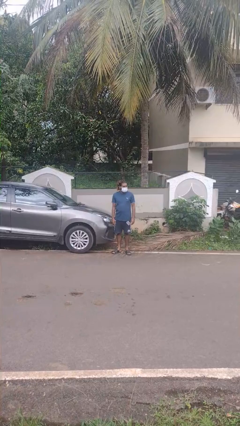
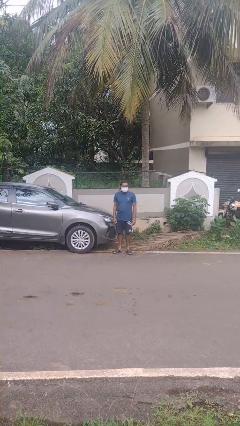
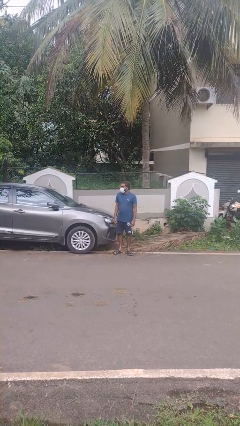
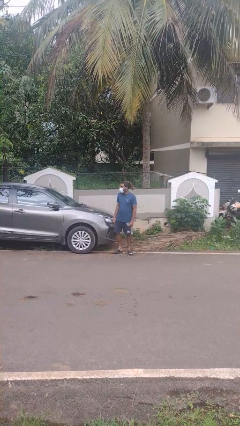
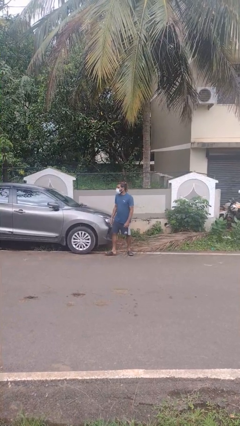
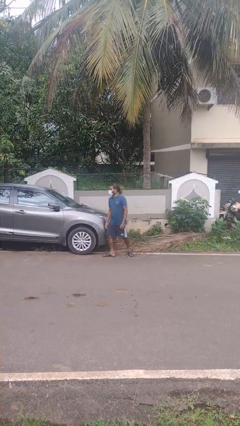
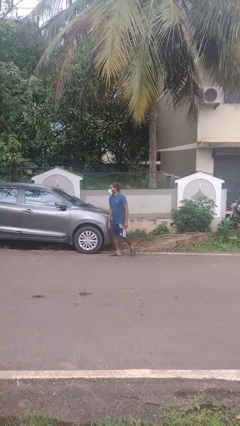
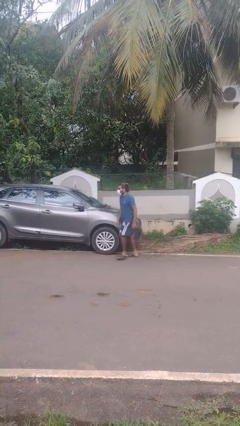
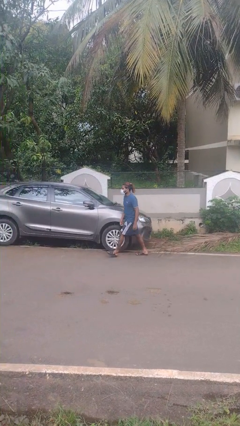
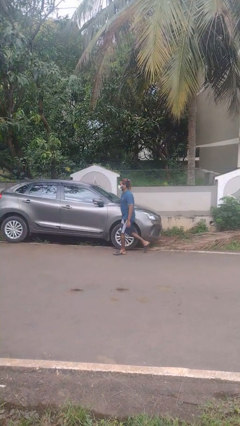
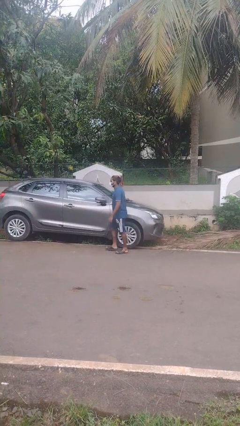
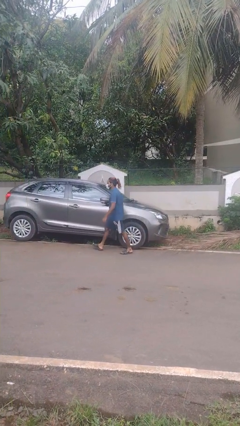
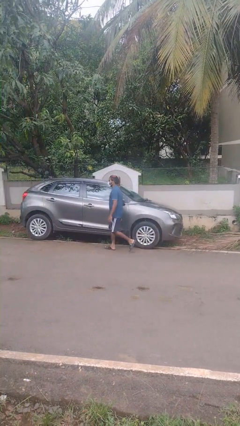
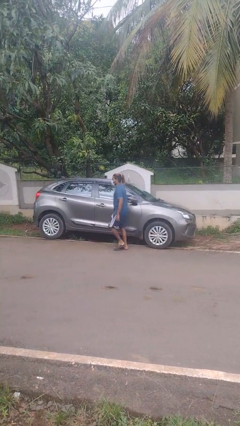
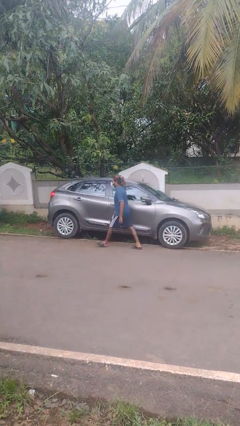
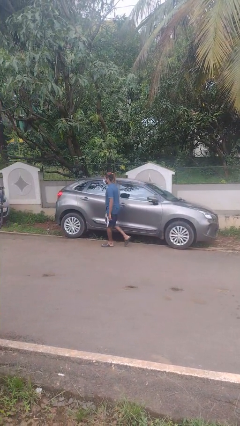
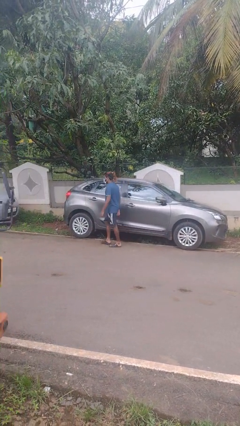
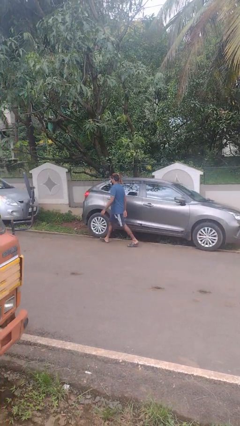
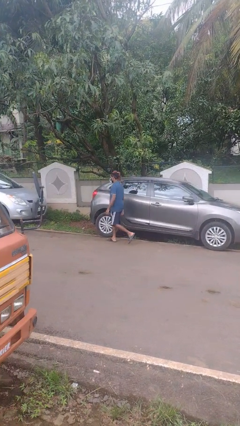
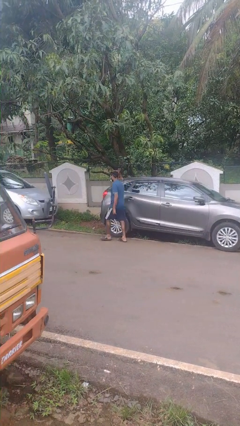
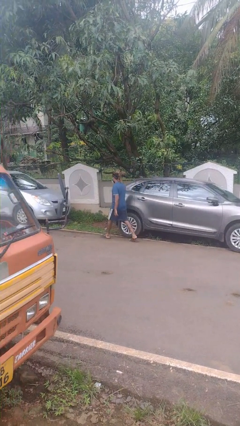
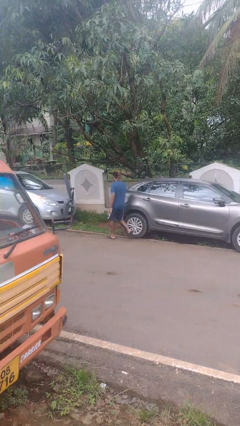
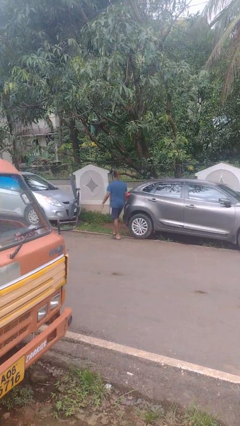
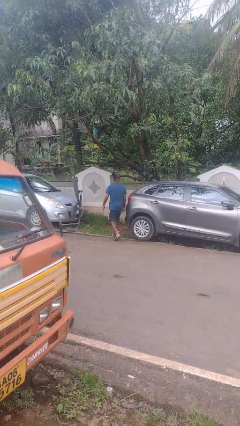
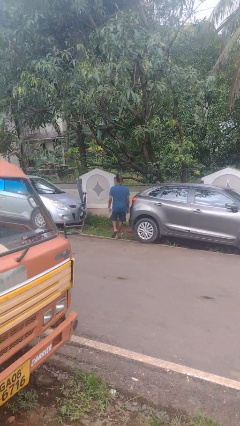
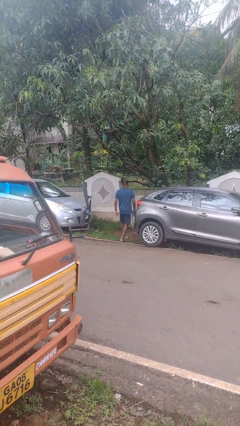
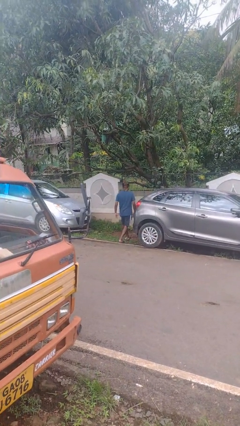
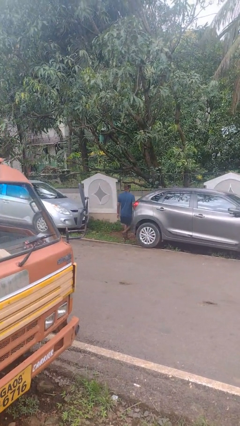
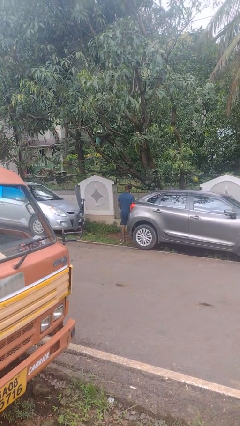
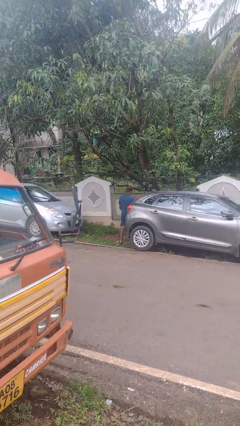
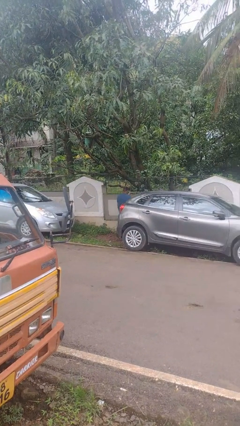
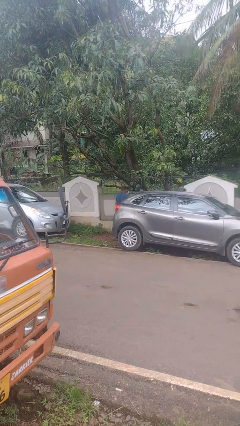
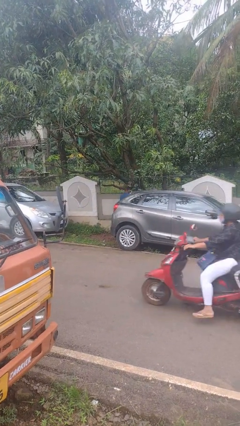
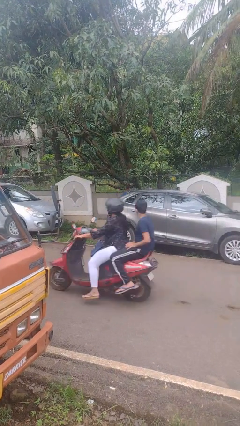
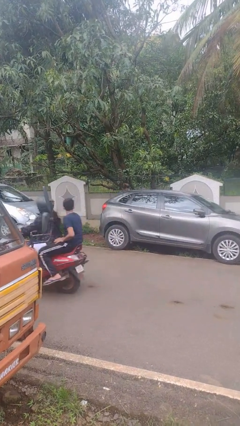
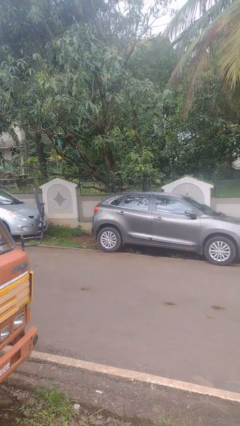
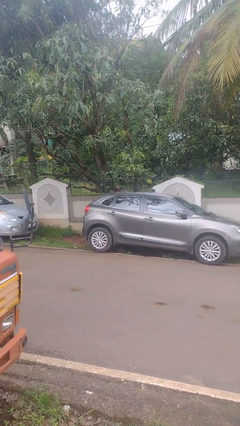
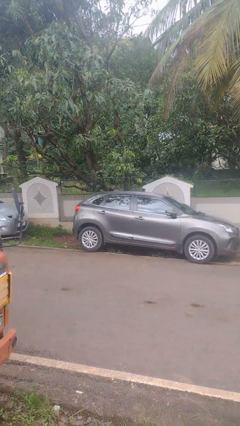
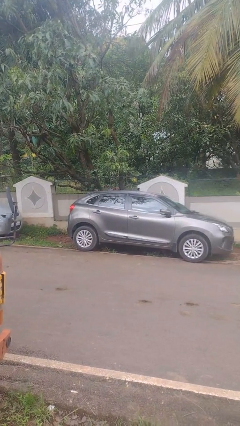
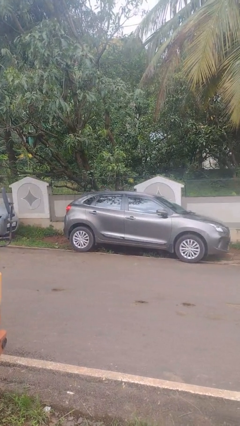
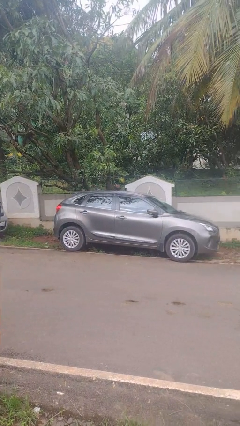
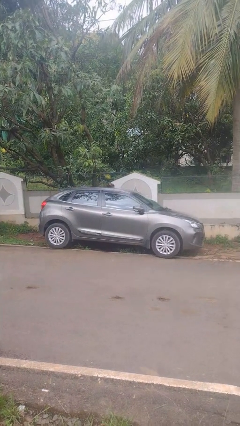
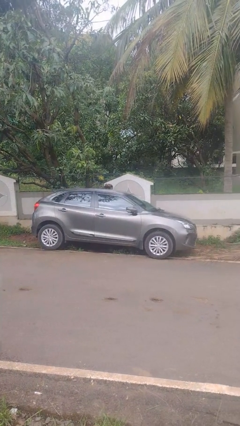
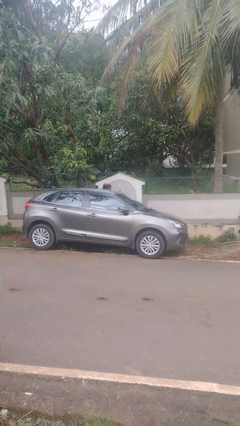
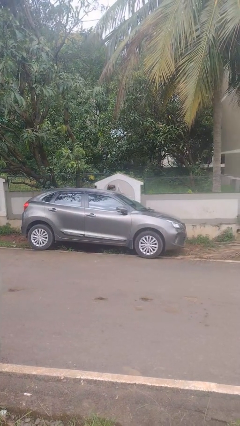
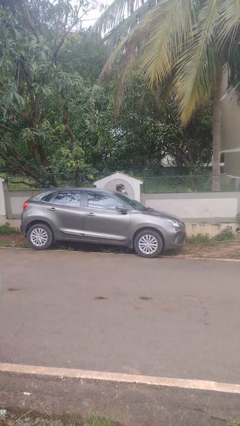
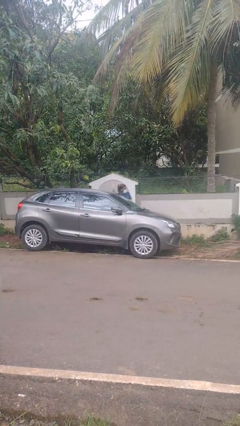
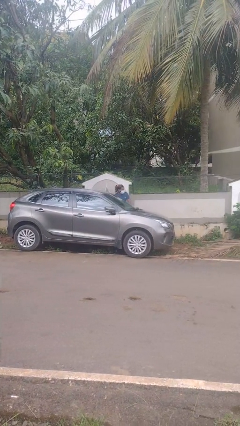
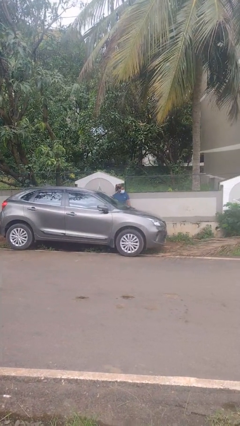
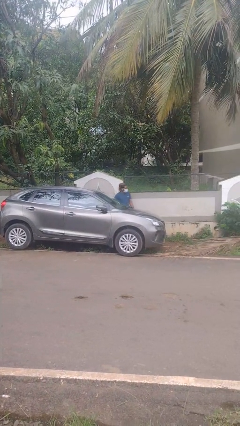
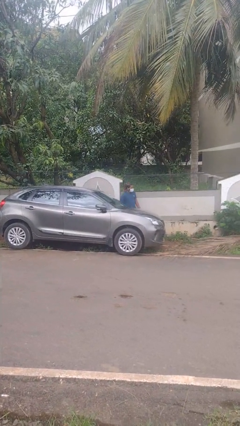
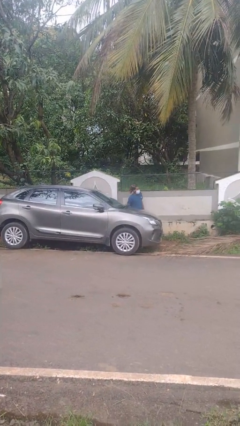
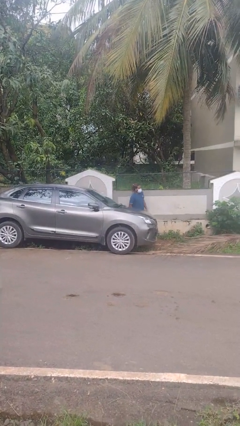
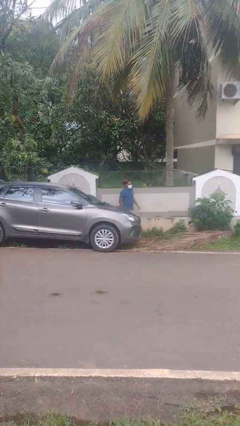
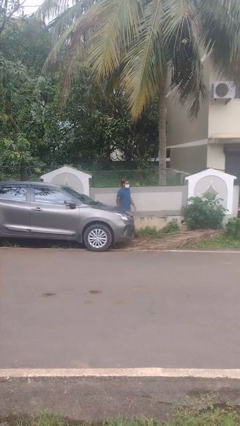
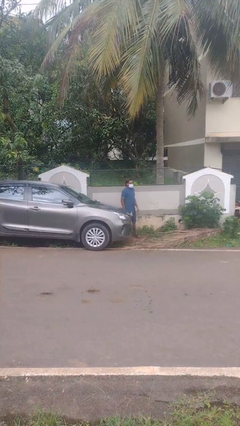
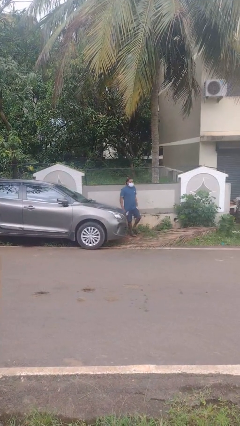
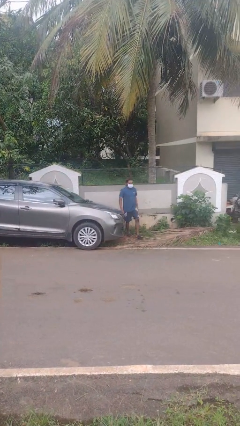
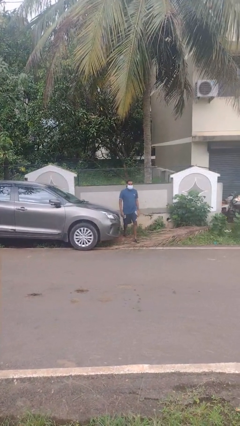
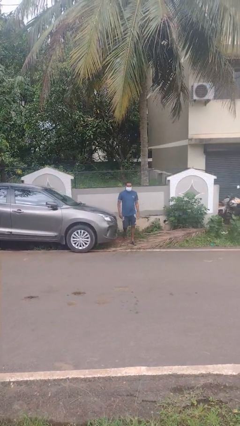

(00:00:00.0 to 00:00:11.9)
person walks around car

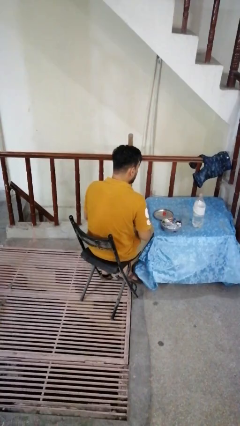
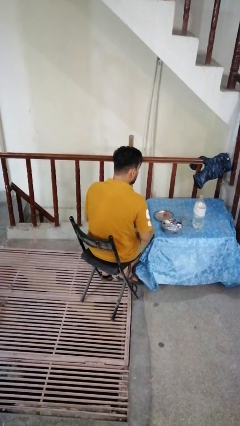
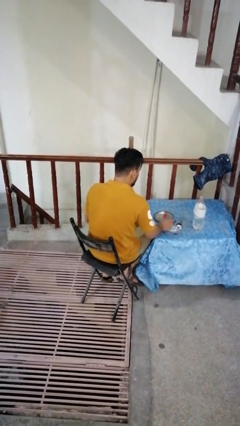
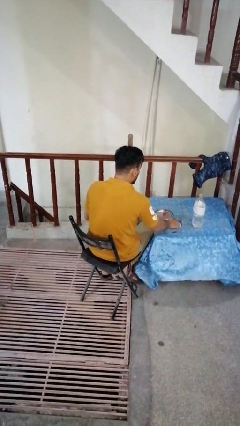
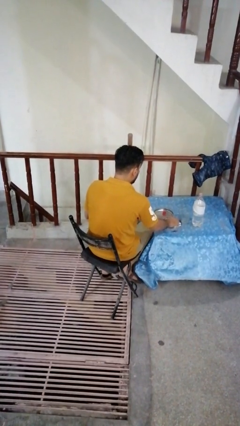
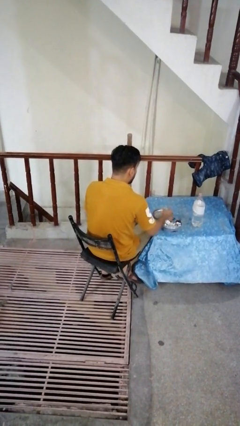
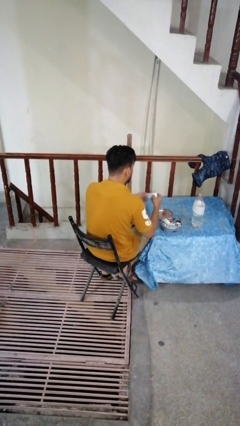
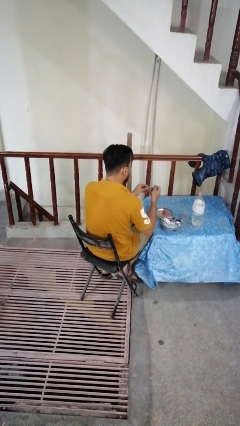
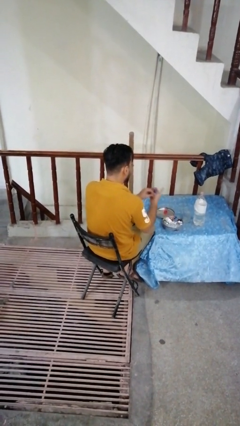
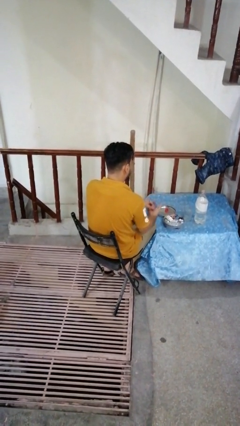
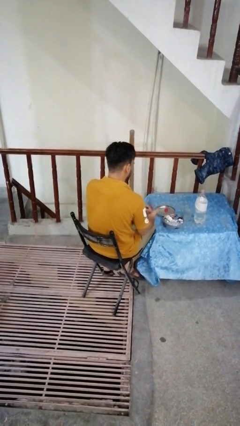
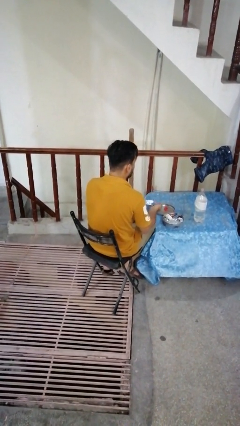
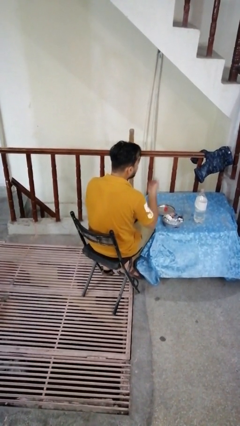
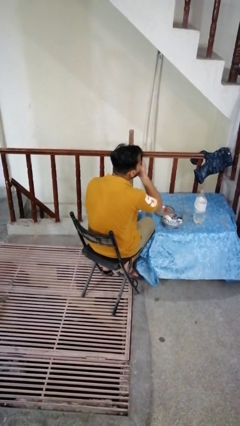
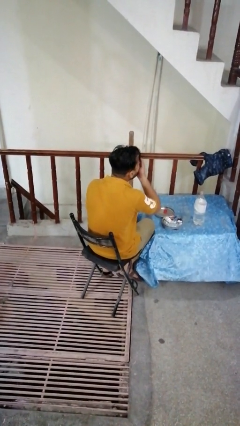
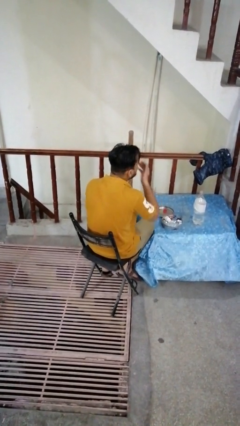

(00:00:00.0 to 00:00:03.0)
person takes medicine pills

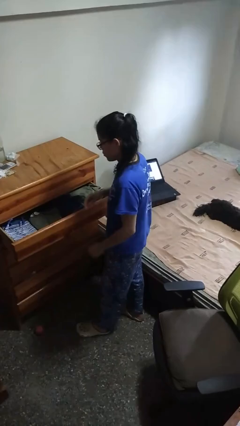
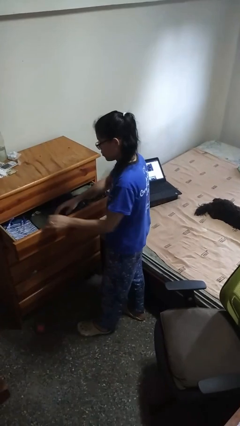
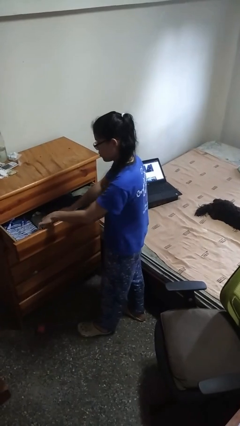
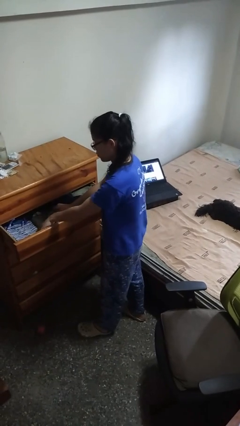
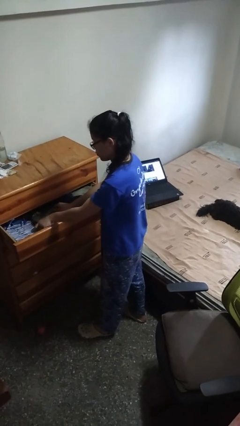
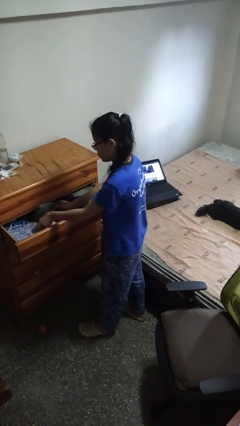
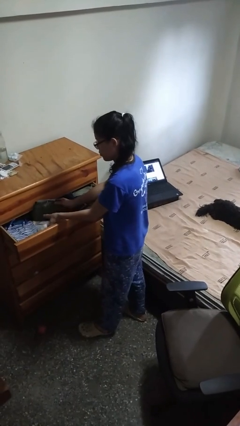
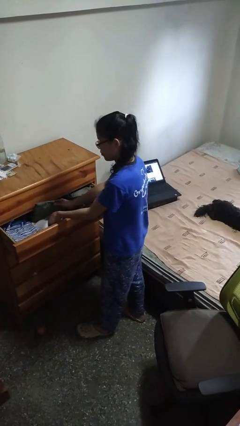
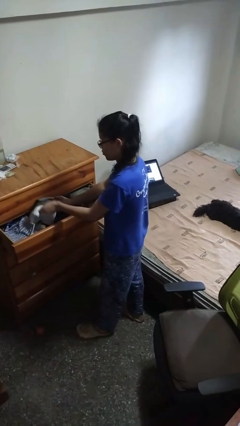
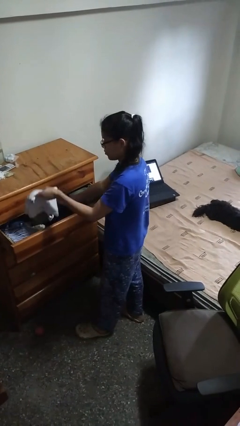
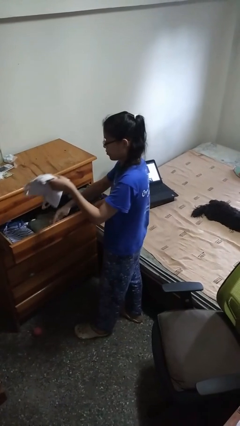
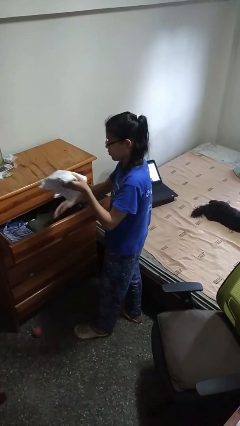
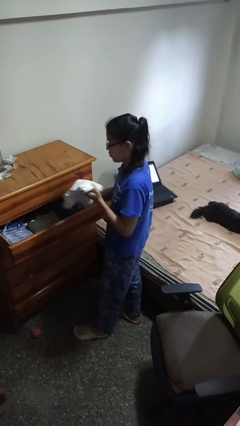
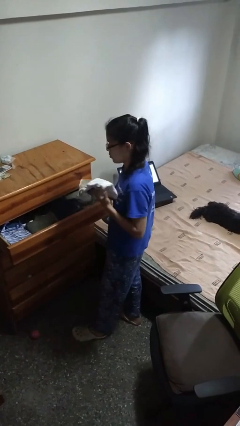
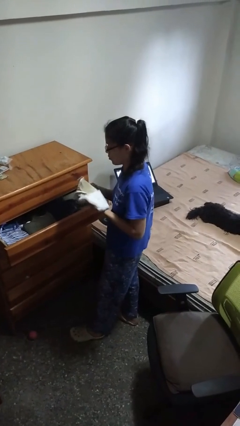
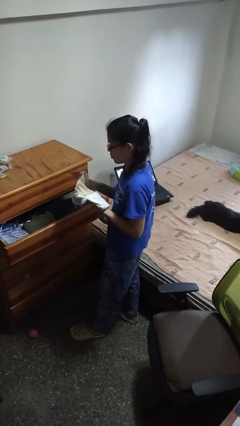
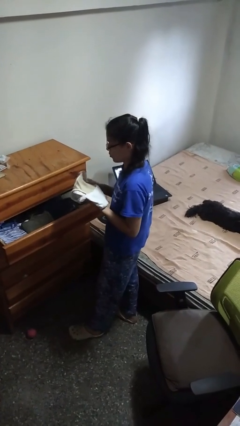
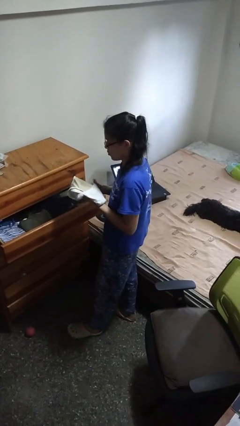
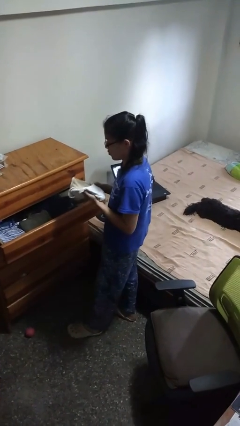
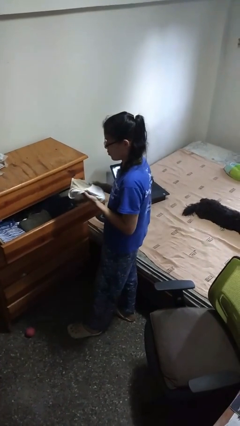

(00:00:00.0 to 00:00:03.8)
person takes clothes from dresser
